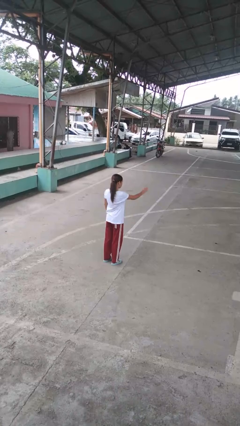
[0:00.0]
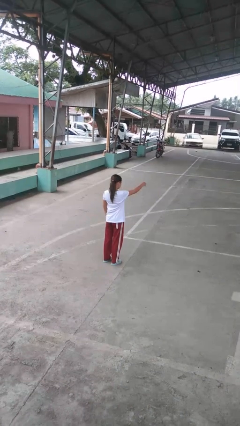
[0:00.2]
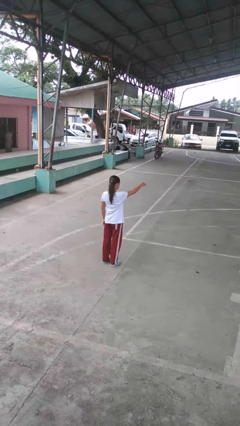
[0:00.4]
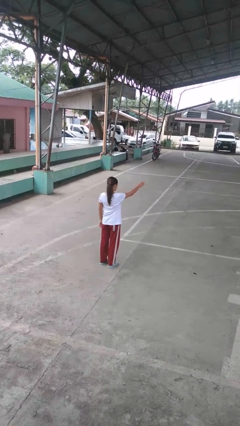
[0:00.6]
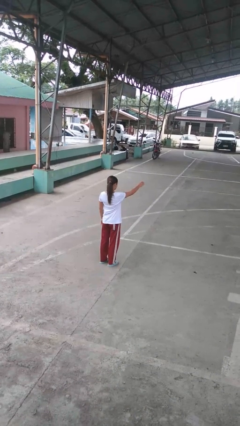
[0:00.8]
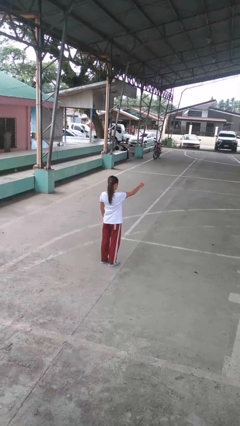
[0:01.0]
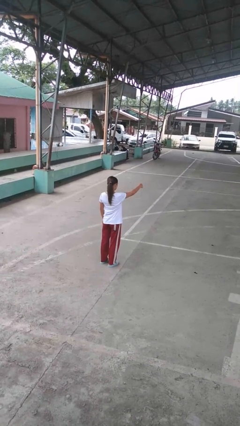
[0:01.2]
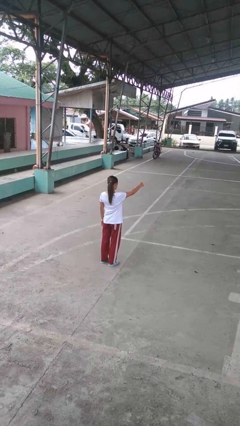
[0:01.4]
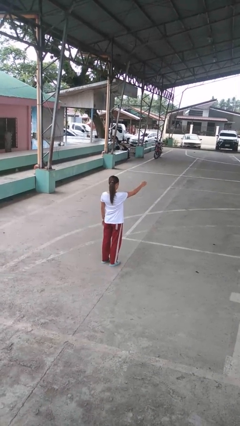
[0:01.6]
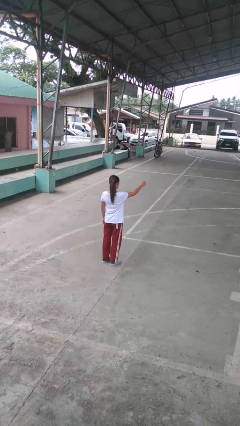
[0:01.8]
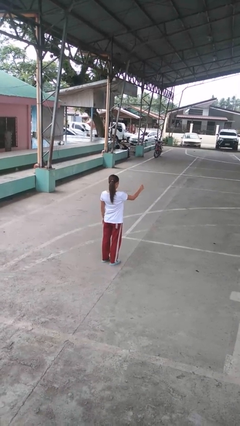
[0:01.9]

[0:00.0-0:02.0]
person gestures come here

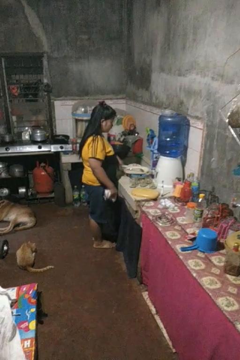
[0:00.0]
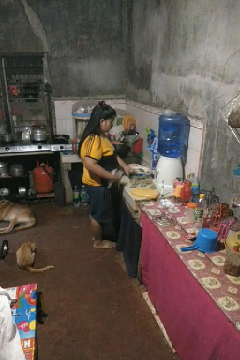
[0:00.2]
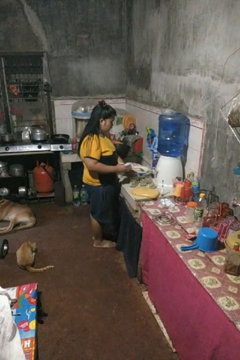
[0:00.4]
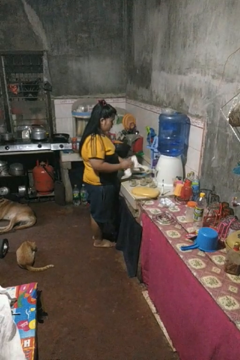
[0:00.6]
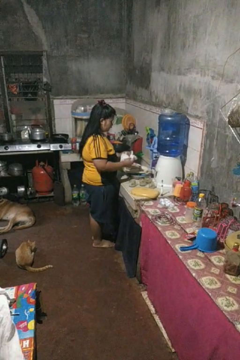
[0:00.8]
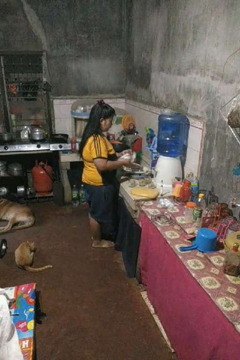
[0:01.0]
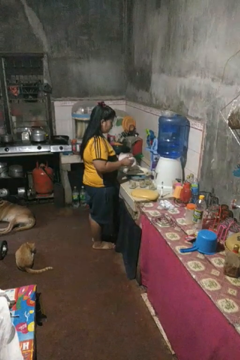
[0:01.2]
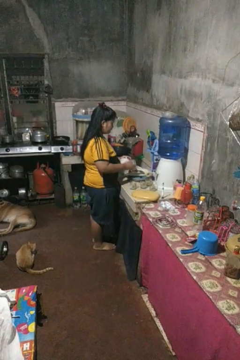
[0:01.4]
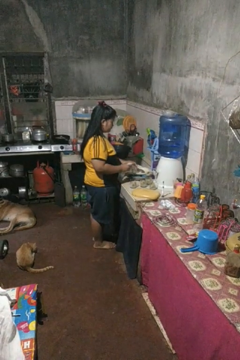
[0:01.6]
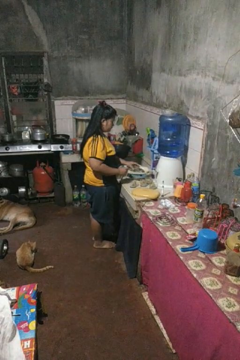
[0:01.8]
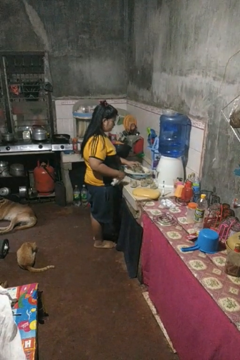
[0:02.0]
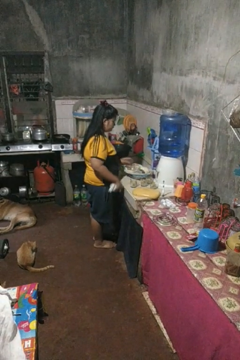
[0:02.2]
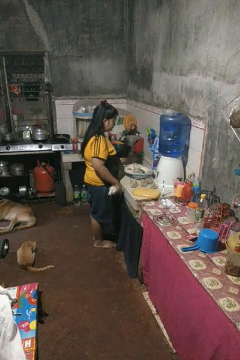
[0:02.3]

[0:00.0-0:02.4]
person dries dish

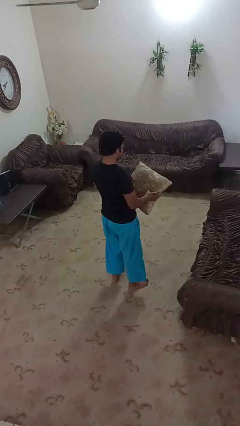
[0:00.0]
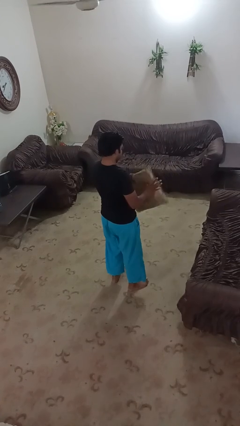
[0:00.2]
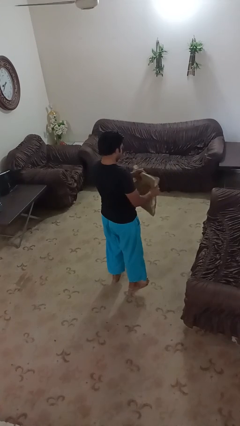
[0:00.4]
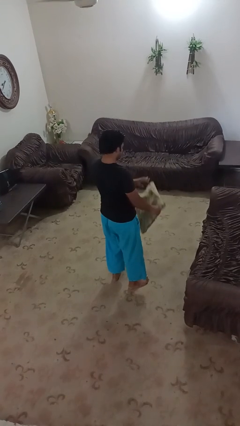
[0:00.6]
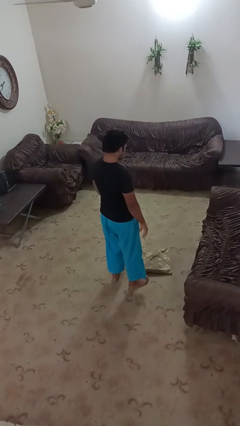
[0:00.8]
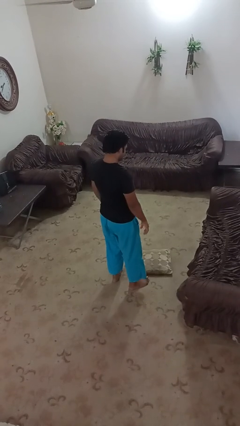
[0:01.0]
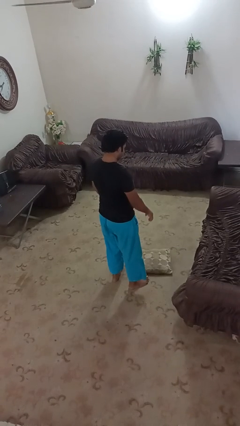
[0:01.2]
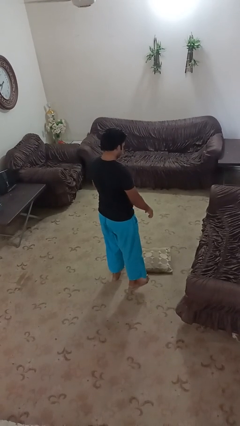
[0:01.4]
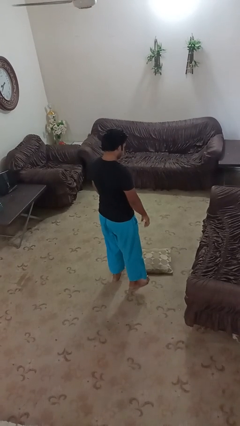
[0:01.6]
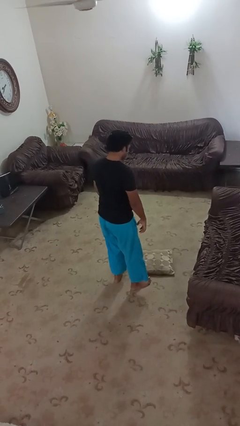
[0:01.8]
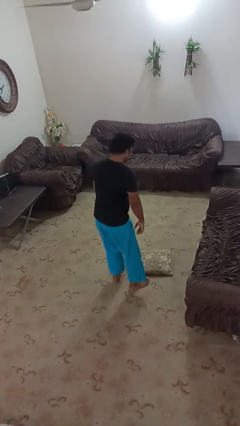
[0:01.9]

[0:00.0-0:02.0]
person drops object

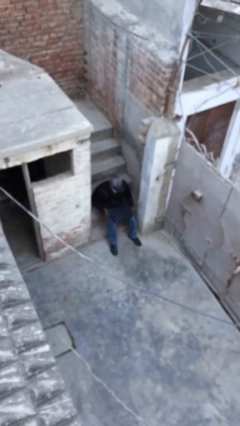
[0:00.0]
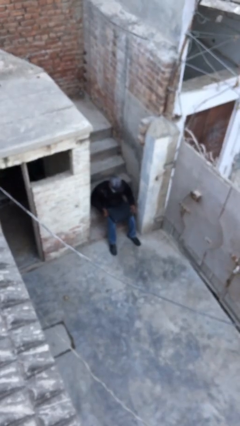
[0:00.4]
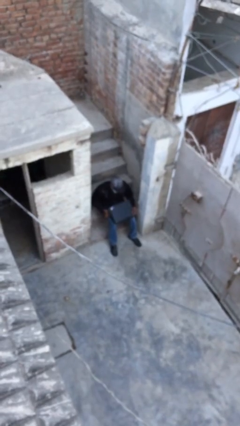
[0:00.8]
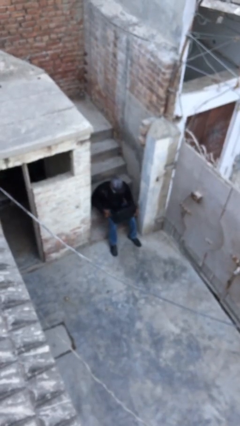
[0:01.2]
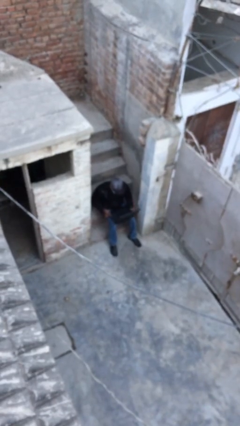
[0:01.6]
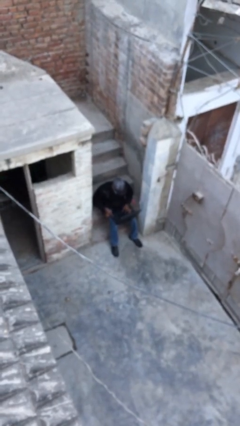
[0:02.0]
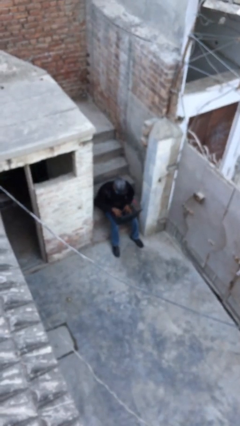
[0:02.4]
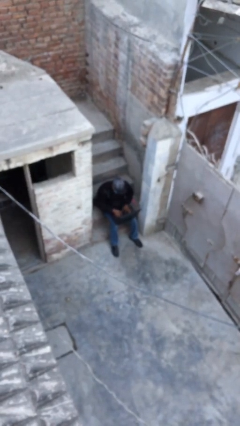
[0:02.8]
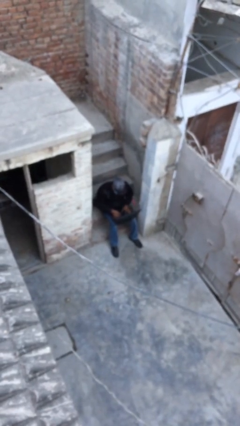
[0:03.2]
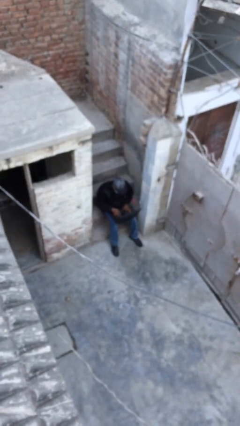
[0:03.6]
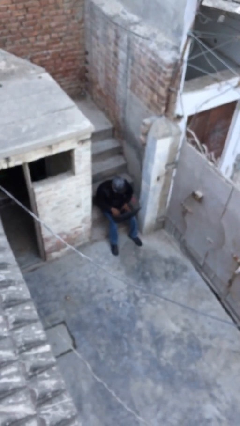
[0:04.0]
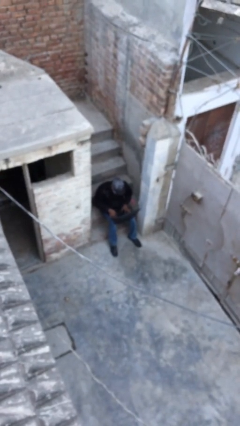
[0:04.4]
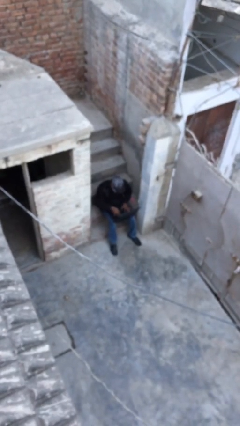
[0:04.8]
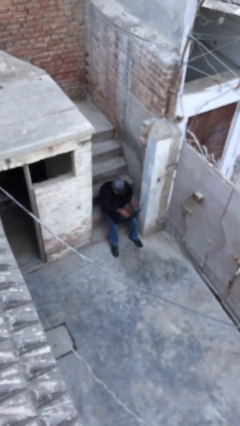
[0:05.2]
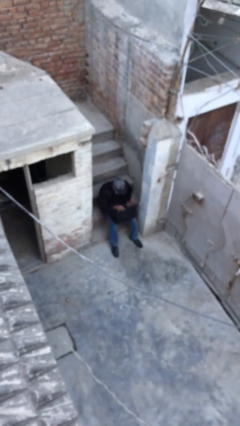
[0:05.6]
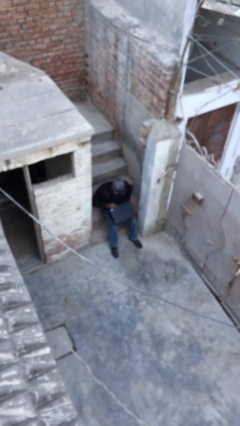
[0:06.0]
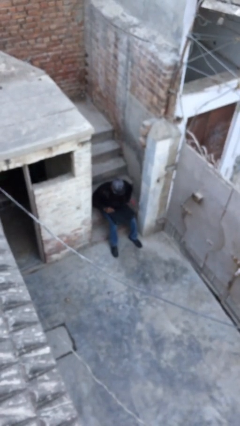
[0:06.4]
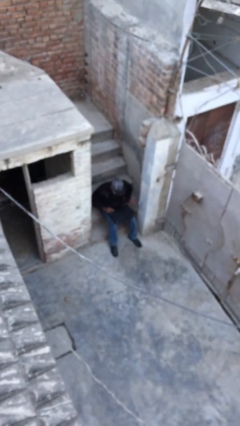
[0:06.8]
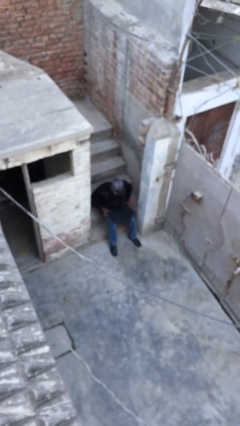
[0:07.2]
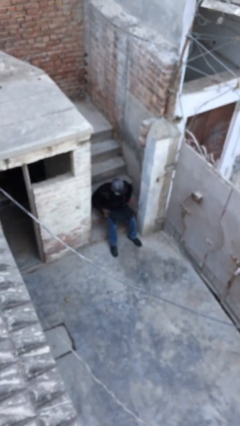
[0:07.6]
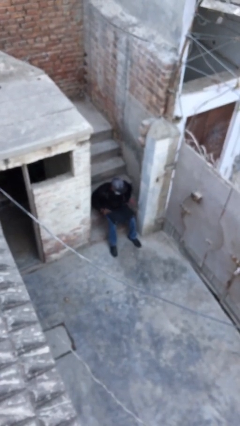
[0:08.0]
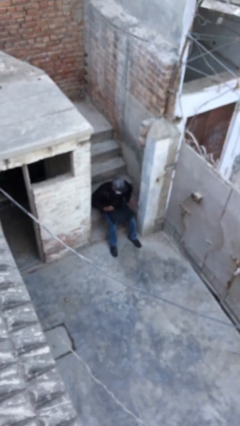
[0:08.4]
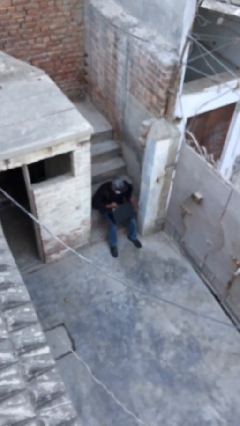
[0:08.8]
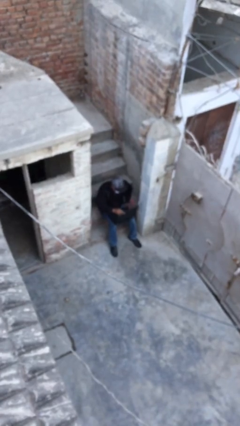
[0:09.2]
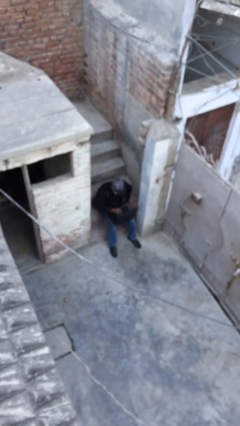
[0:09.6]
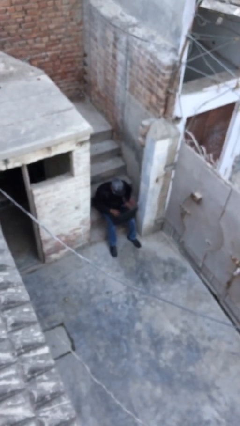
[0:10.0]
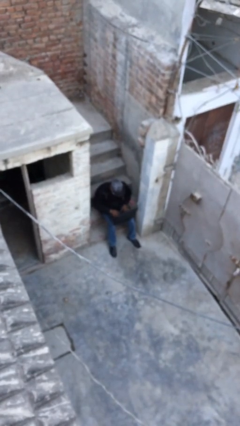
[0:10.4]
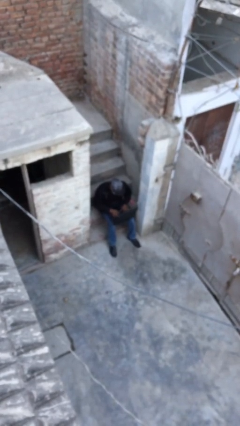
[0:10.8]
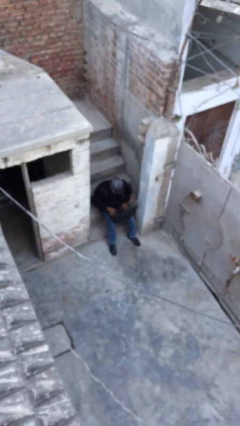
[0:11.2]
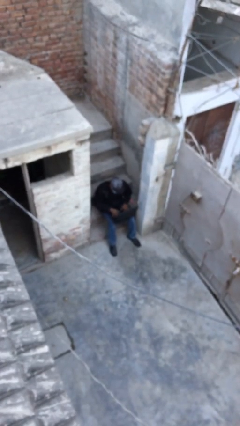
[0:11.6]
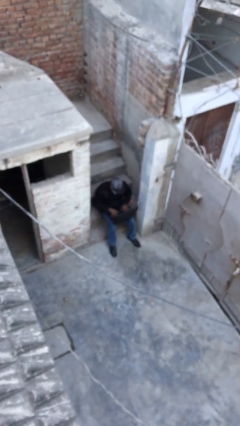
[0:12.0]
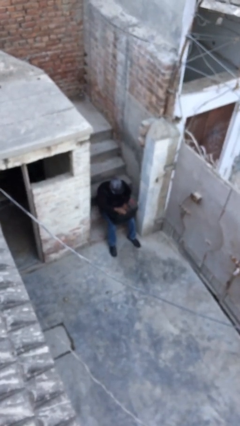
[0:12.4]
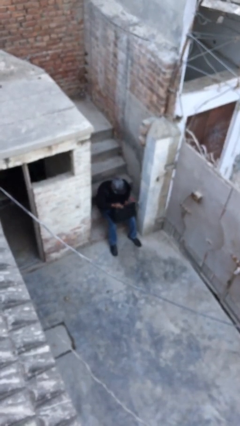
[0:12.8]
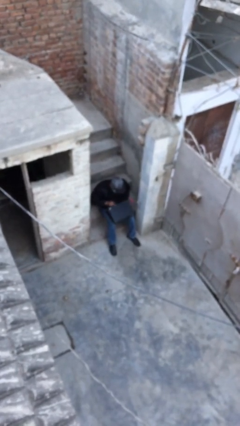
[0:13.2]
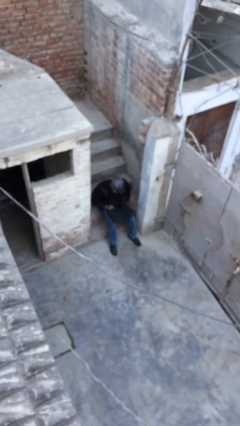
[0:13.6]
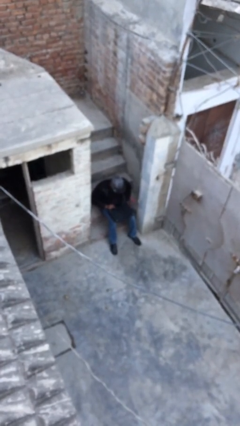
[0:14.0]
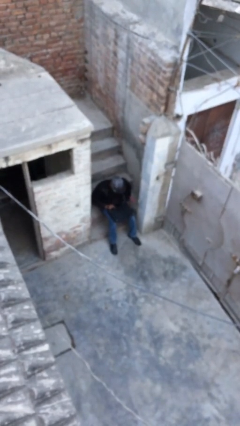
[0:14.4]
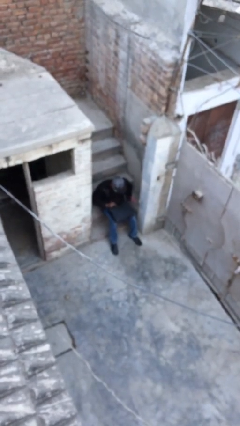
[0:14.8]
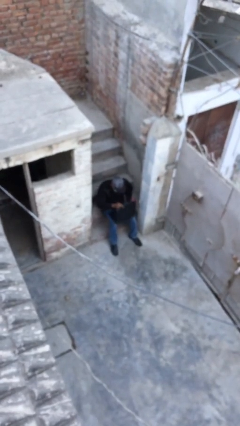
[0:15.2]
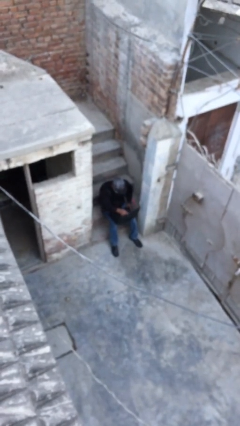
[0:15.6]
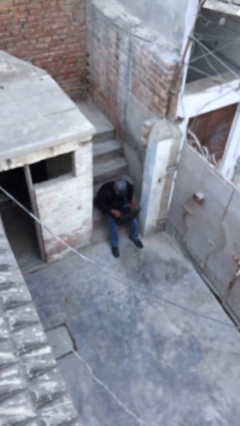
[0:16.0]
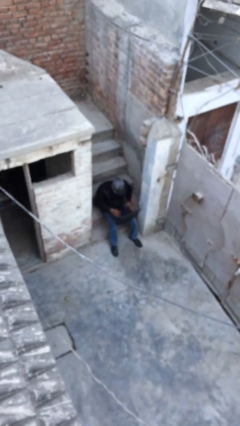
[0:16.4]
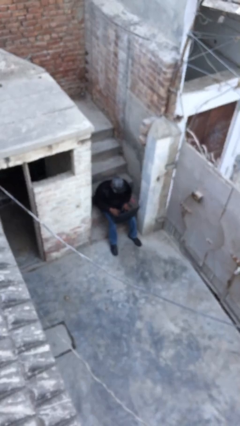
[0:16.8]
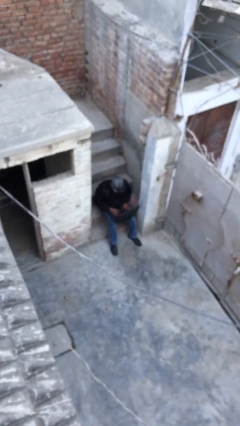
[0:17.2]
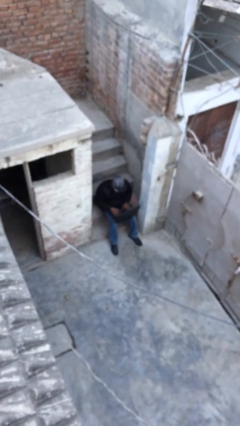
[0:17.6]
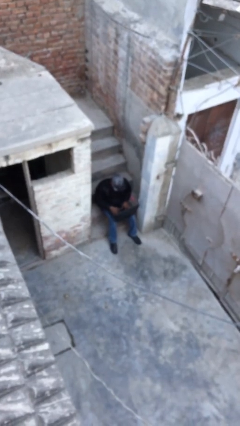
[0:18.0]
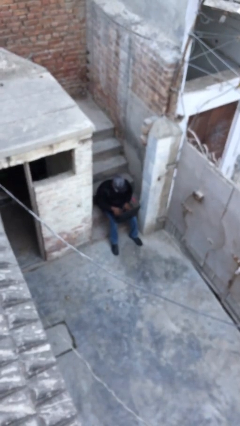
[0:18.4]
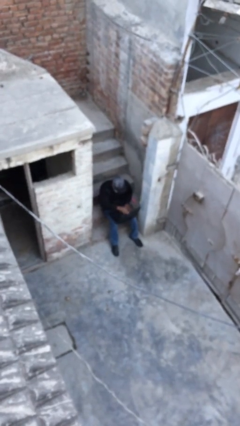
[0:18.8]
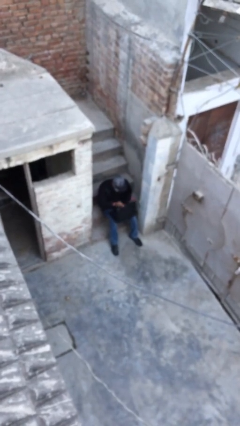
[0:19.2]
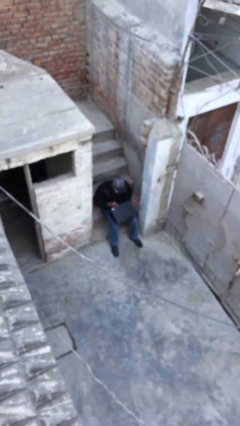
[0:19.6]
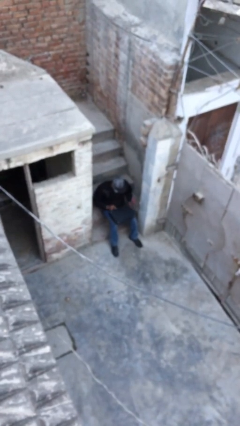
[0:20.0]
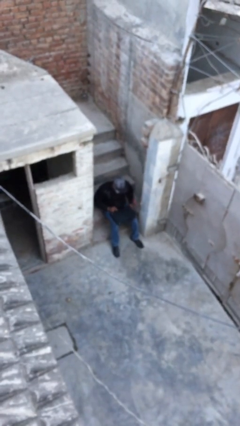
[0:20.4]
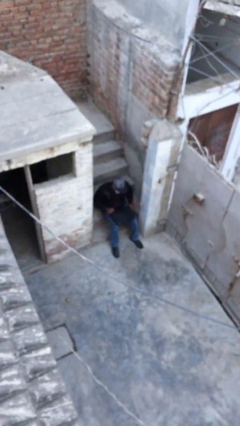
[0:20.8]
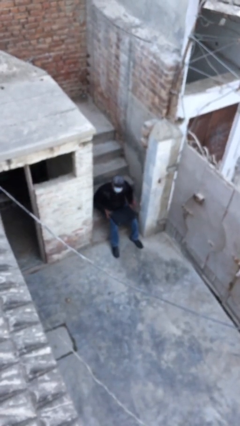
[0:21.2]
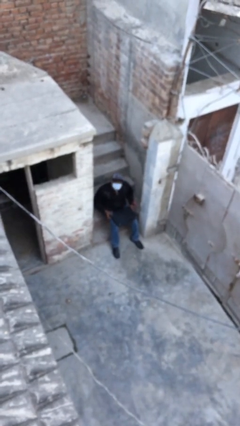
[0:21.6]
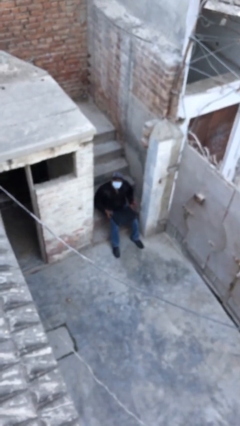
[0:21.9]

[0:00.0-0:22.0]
person interacts with laptop

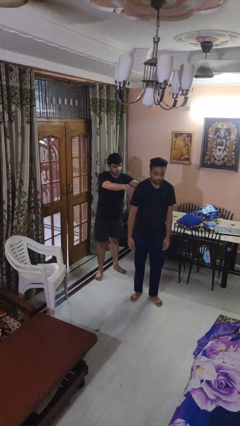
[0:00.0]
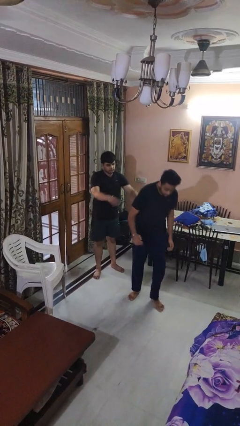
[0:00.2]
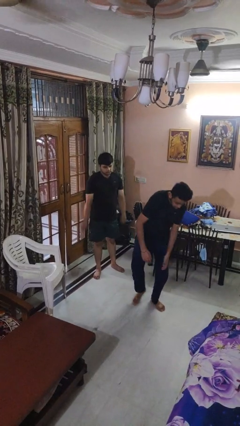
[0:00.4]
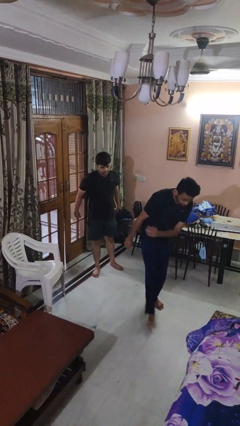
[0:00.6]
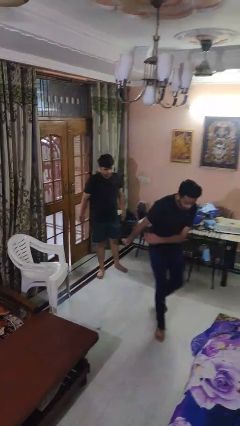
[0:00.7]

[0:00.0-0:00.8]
person shoves person
